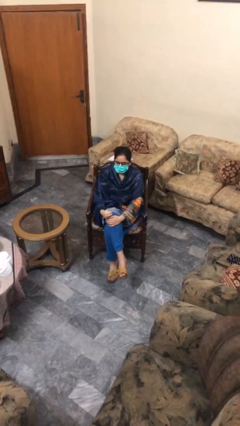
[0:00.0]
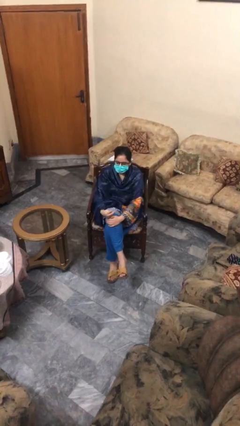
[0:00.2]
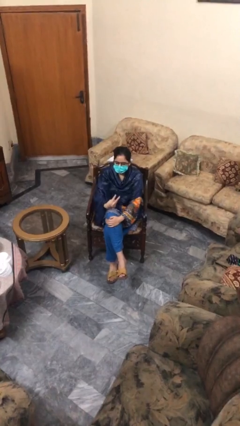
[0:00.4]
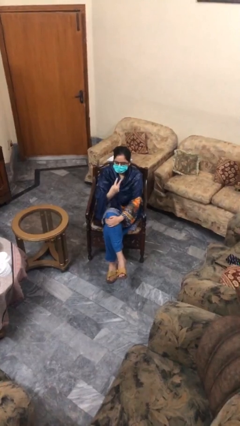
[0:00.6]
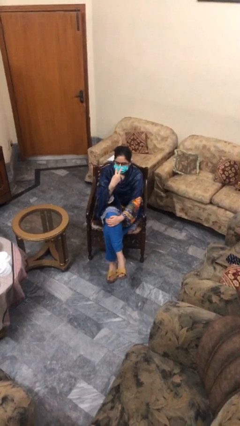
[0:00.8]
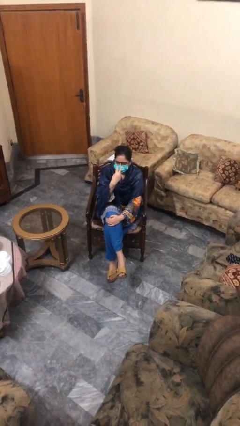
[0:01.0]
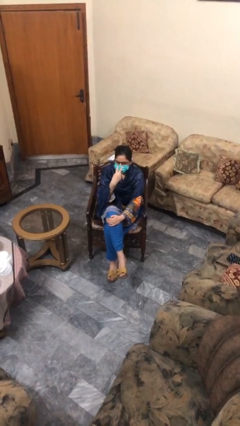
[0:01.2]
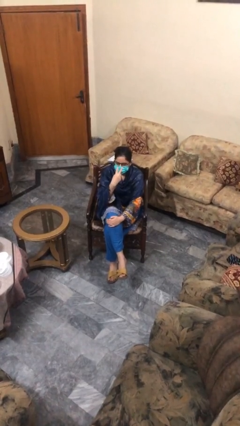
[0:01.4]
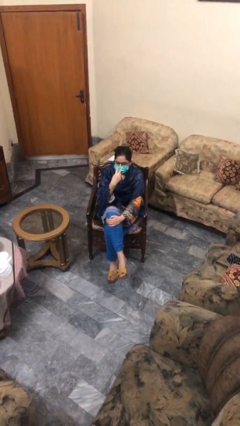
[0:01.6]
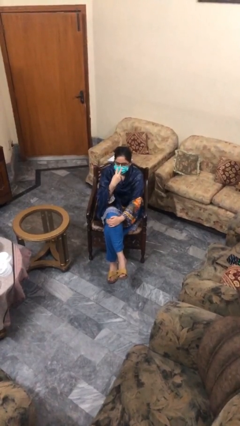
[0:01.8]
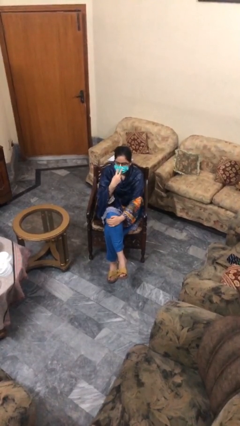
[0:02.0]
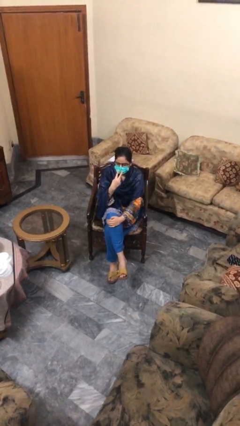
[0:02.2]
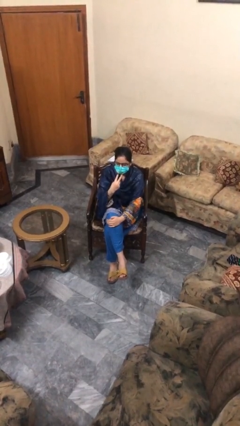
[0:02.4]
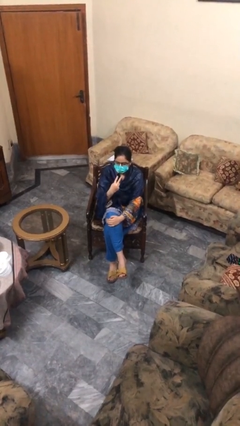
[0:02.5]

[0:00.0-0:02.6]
person gestures watch closely

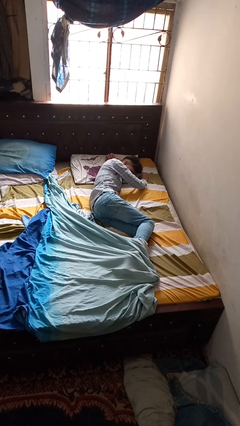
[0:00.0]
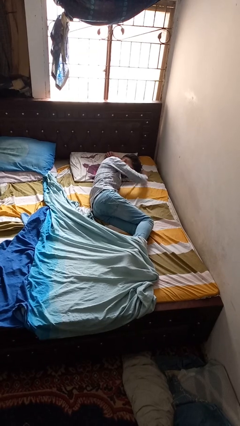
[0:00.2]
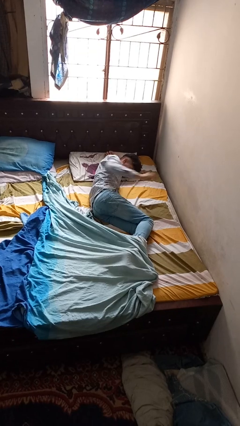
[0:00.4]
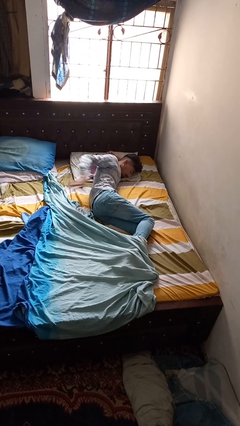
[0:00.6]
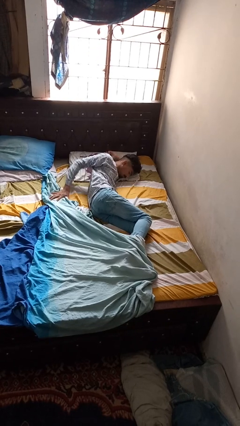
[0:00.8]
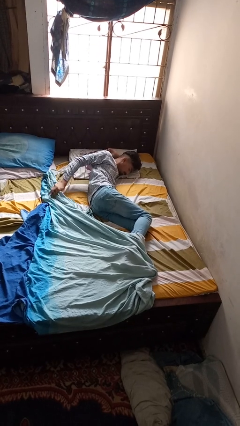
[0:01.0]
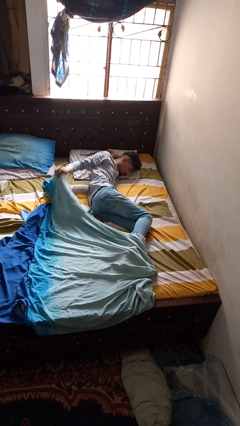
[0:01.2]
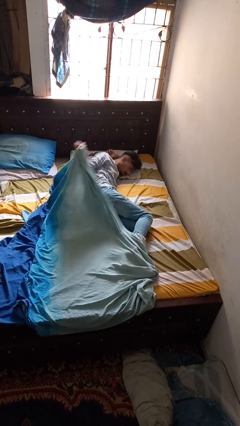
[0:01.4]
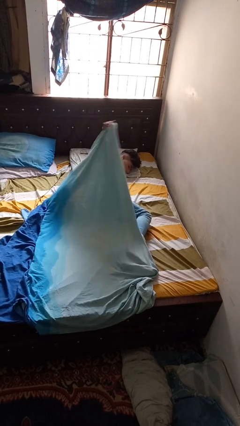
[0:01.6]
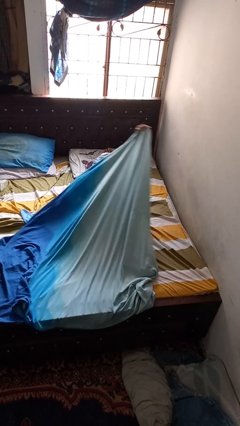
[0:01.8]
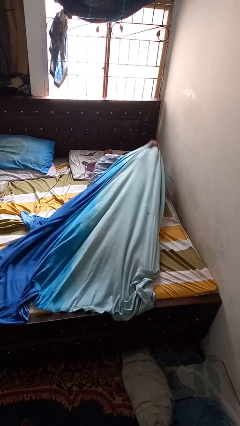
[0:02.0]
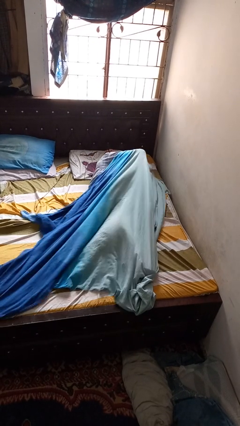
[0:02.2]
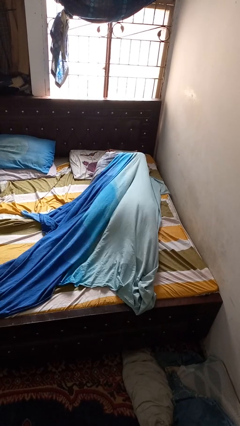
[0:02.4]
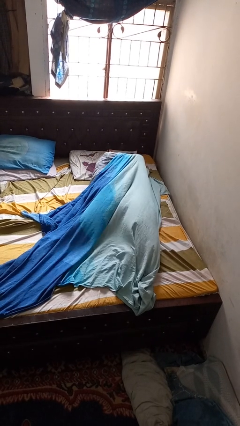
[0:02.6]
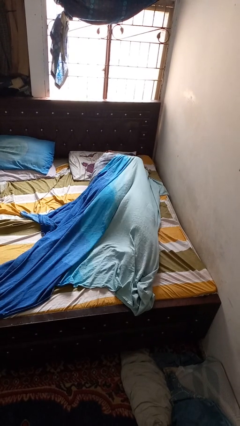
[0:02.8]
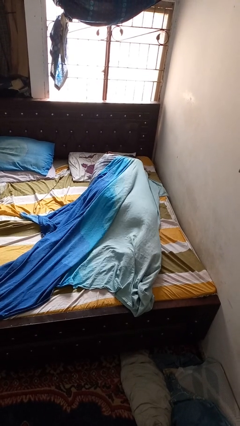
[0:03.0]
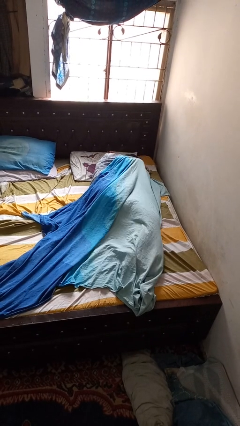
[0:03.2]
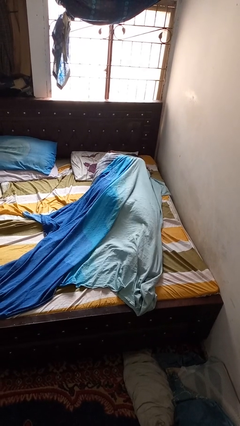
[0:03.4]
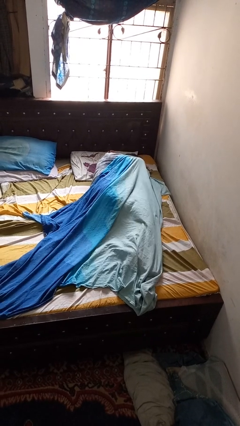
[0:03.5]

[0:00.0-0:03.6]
person covers with blanket

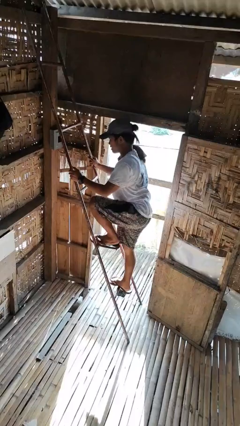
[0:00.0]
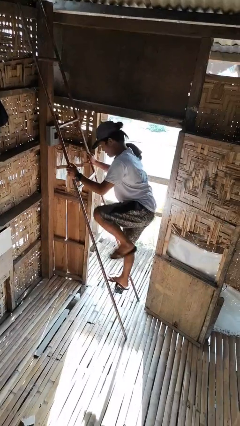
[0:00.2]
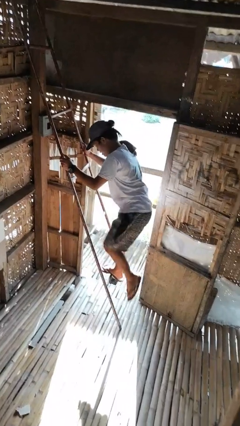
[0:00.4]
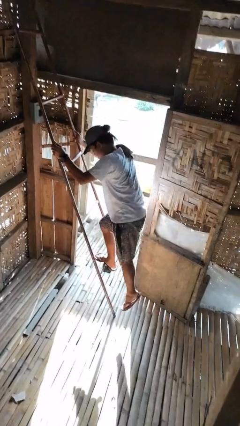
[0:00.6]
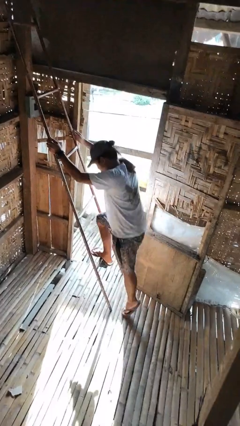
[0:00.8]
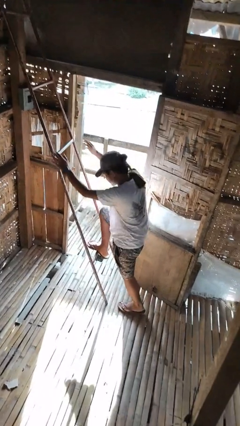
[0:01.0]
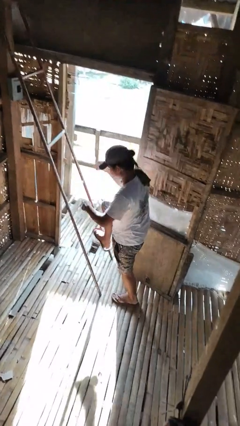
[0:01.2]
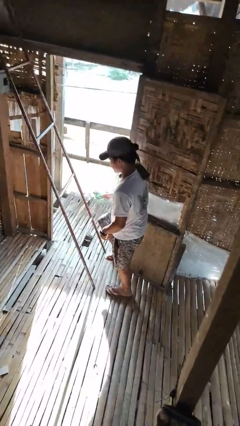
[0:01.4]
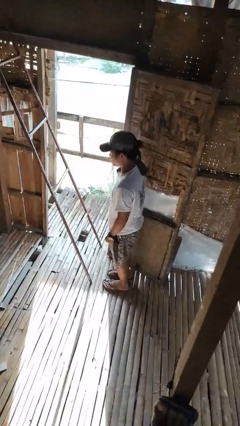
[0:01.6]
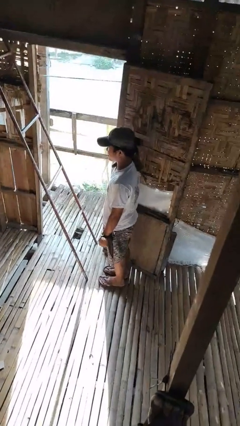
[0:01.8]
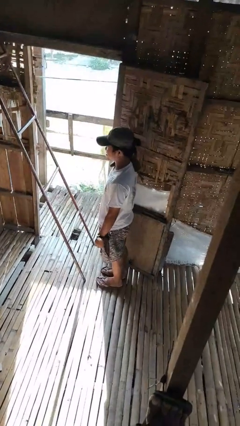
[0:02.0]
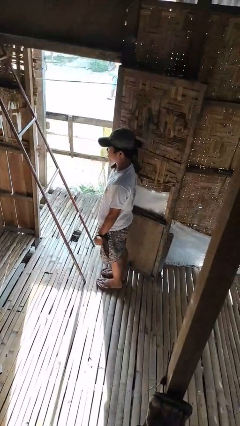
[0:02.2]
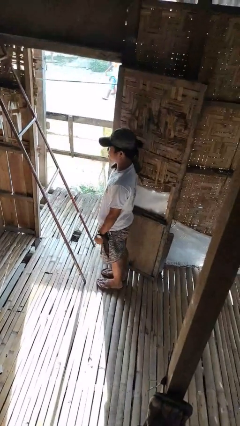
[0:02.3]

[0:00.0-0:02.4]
person climbs down ladder

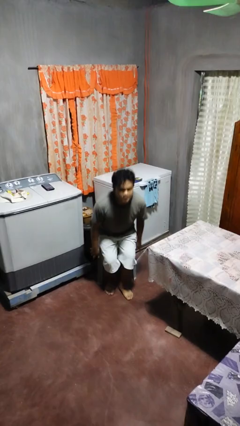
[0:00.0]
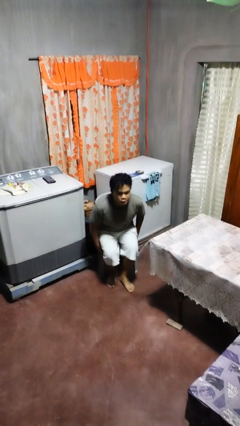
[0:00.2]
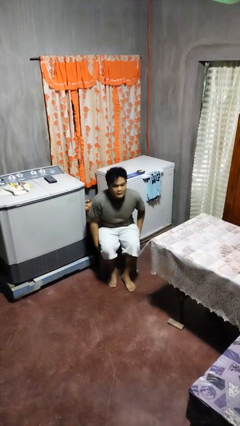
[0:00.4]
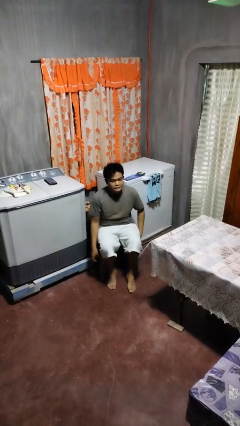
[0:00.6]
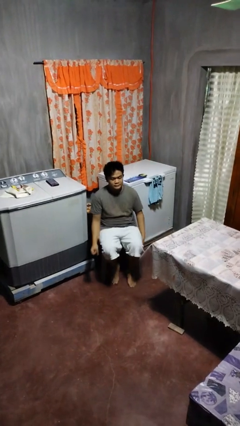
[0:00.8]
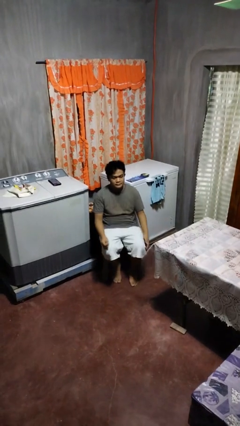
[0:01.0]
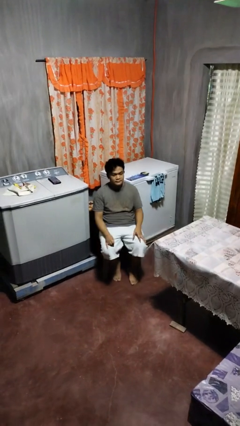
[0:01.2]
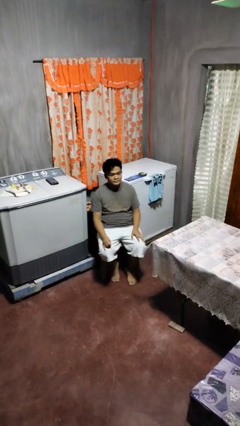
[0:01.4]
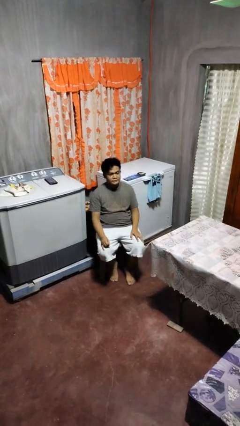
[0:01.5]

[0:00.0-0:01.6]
person sits down

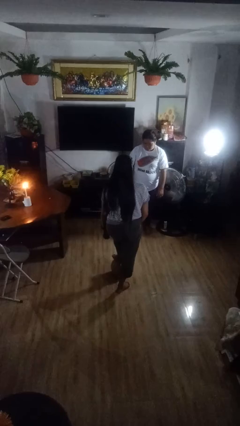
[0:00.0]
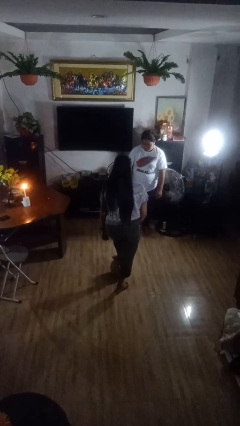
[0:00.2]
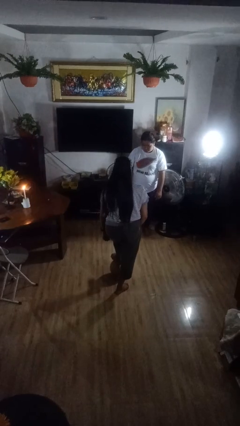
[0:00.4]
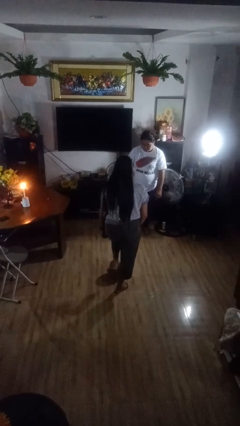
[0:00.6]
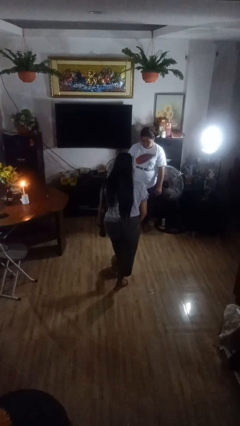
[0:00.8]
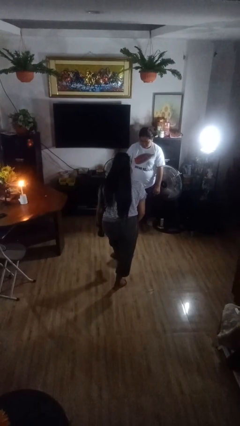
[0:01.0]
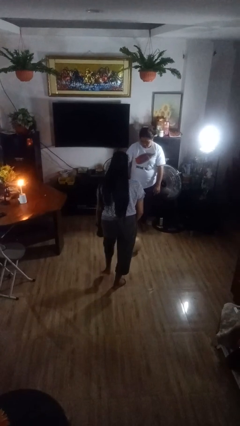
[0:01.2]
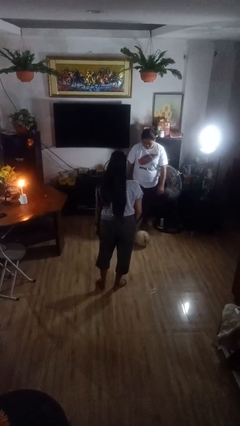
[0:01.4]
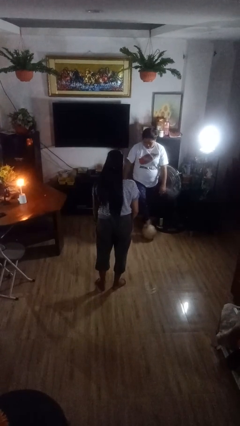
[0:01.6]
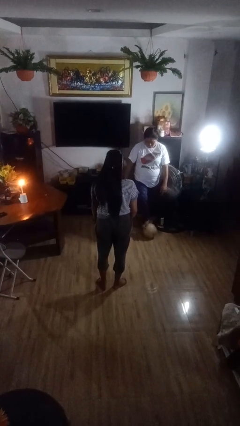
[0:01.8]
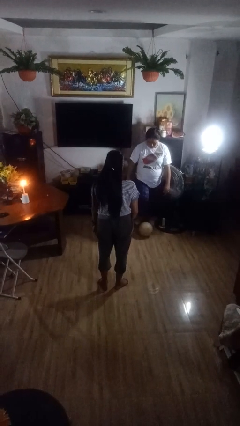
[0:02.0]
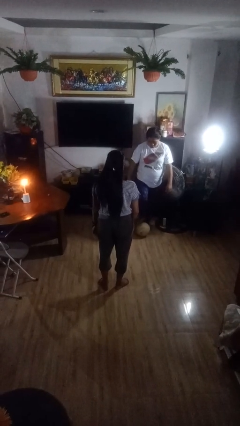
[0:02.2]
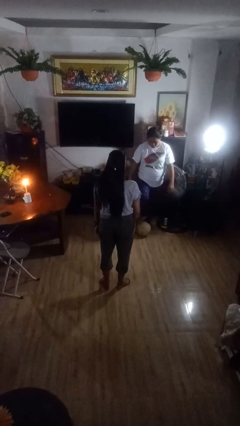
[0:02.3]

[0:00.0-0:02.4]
person kicks object to person

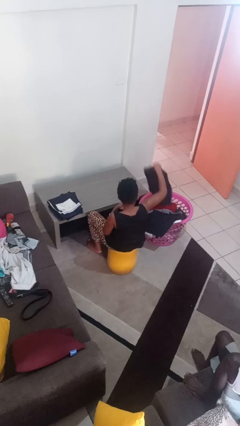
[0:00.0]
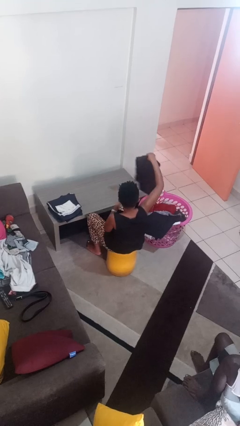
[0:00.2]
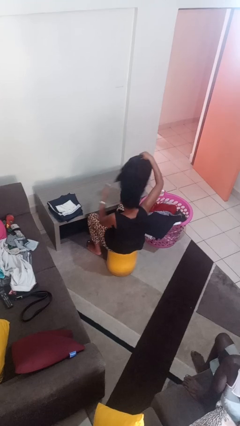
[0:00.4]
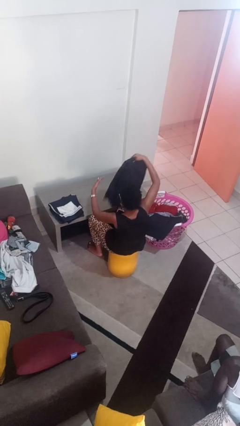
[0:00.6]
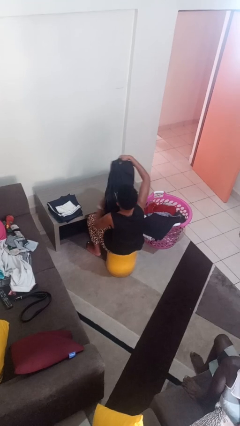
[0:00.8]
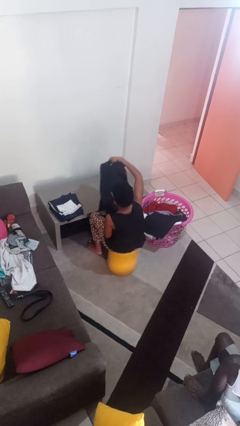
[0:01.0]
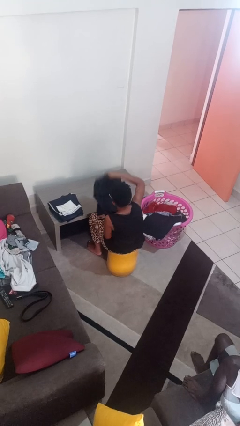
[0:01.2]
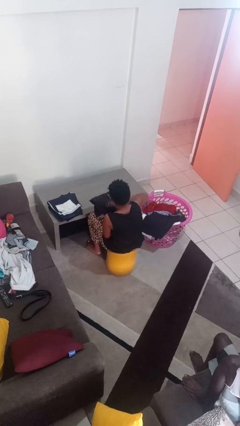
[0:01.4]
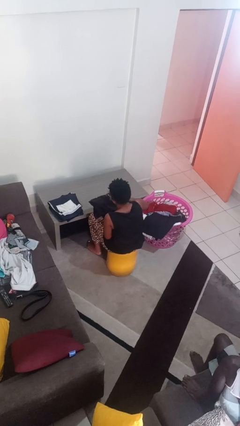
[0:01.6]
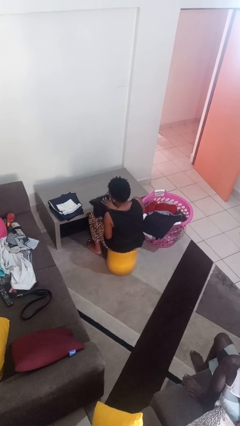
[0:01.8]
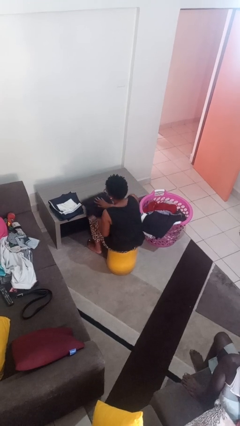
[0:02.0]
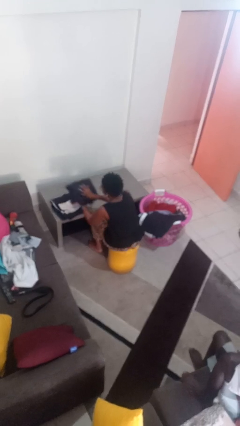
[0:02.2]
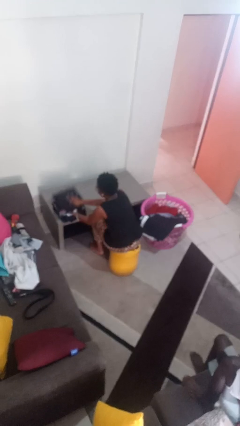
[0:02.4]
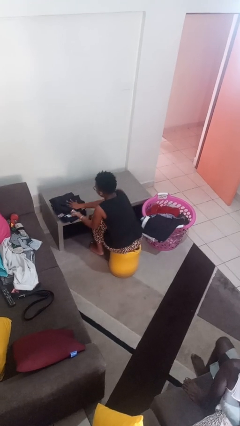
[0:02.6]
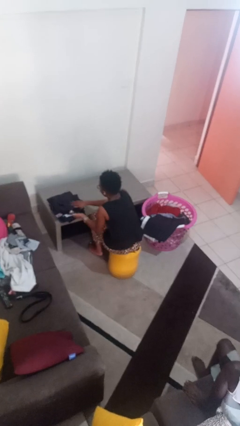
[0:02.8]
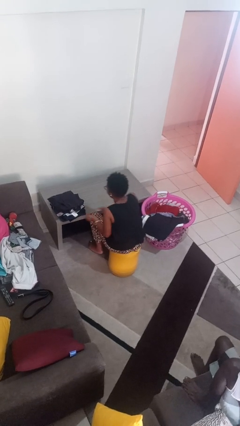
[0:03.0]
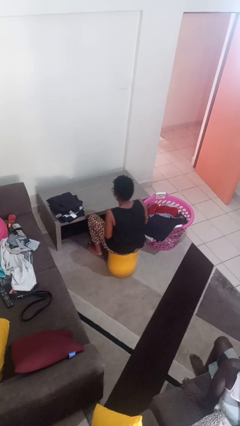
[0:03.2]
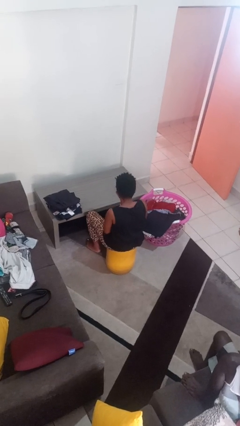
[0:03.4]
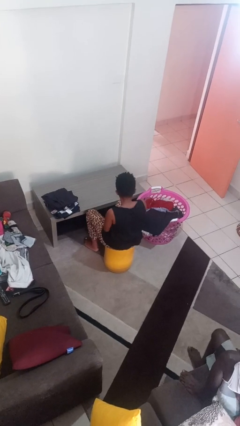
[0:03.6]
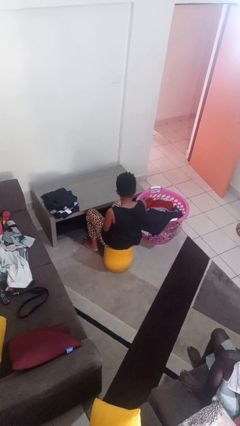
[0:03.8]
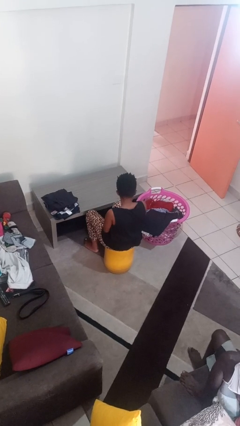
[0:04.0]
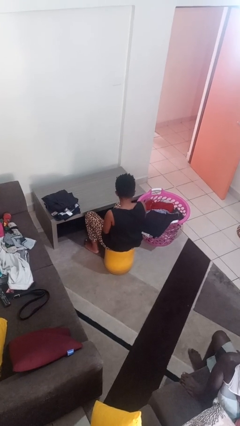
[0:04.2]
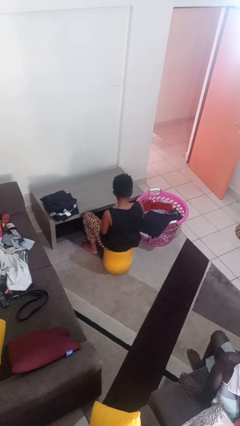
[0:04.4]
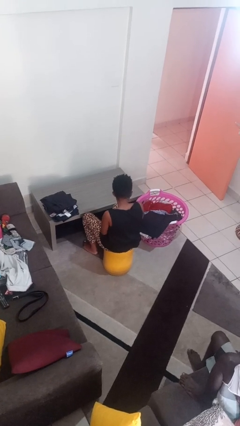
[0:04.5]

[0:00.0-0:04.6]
person folds pants

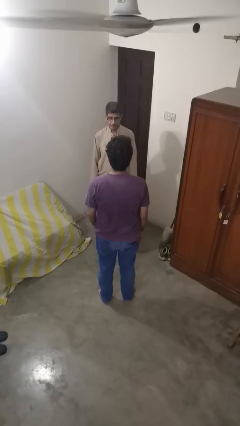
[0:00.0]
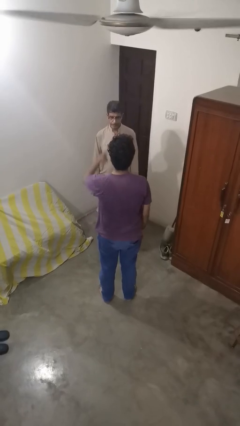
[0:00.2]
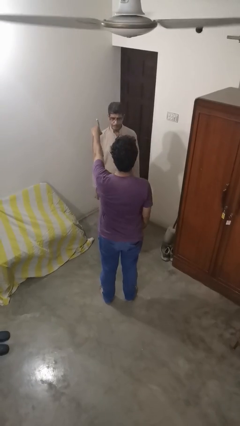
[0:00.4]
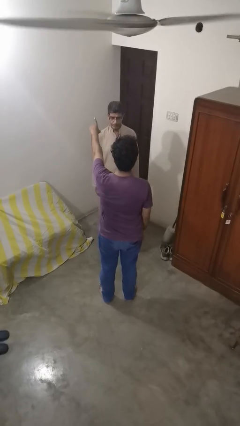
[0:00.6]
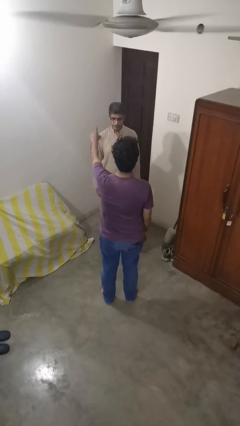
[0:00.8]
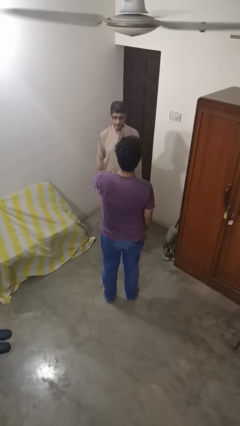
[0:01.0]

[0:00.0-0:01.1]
person shoves person
